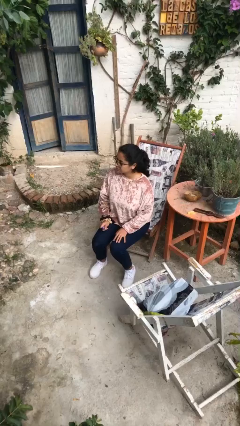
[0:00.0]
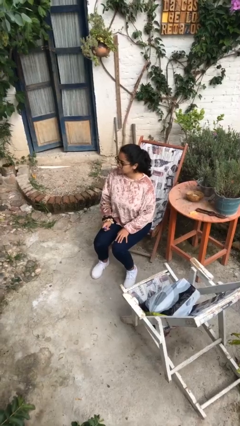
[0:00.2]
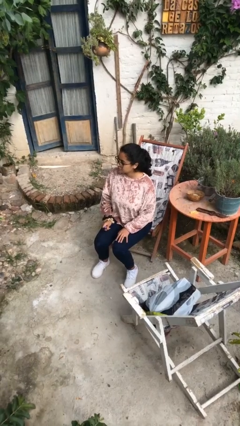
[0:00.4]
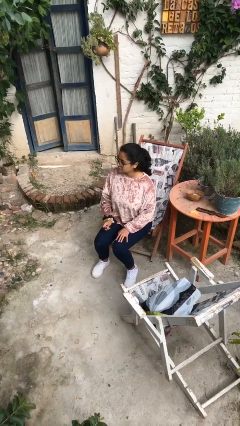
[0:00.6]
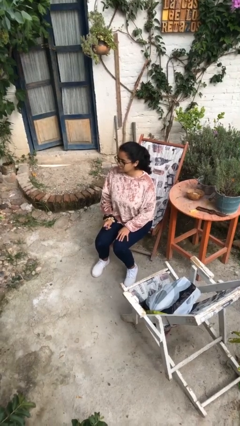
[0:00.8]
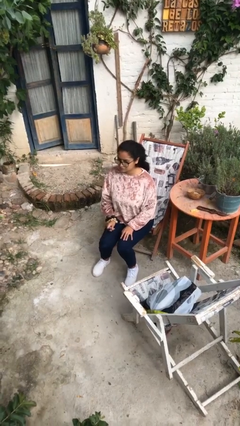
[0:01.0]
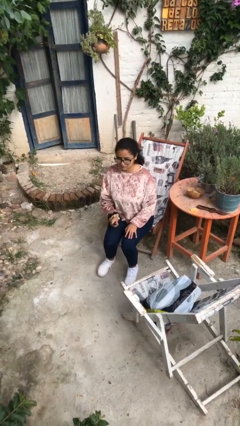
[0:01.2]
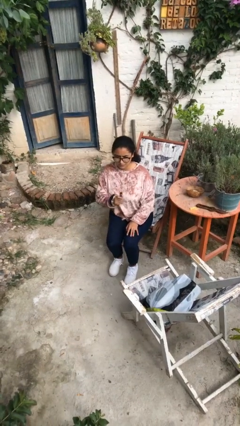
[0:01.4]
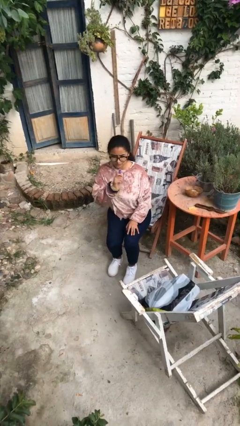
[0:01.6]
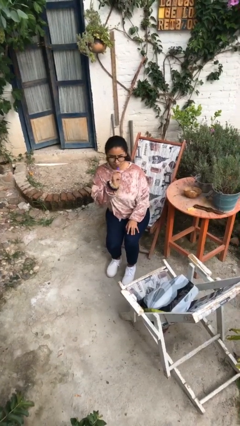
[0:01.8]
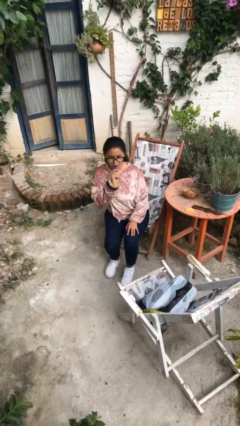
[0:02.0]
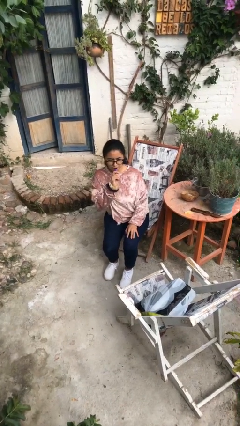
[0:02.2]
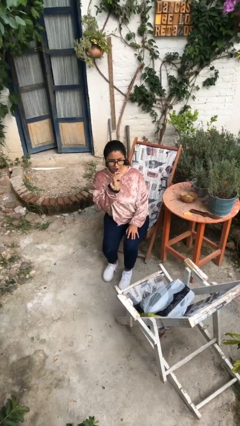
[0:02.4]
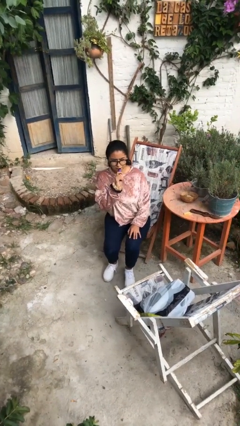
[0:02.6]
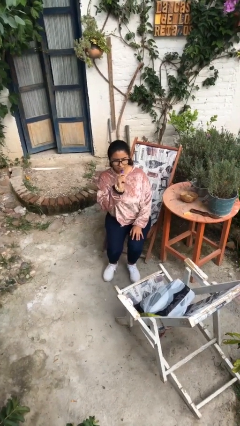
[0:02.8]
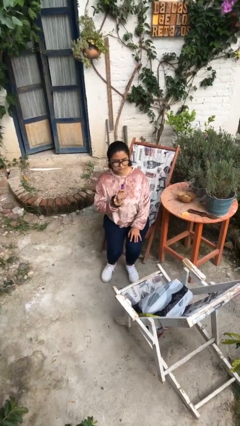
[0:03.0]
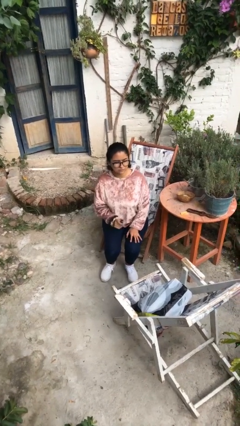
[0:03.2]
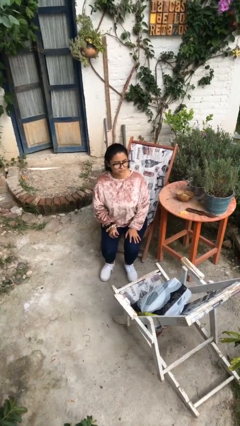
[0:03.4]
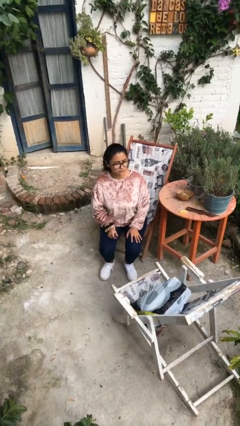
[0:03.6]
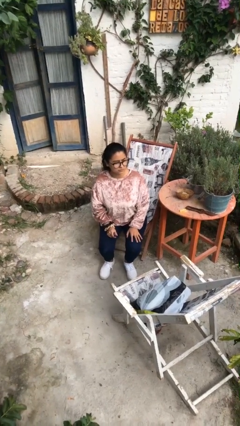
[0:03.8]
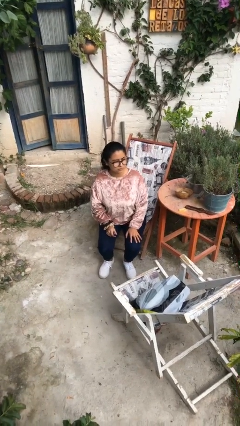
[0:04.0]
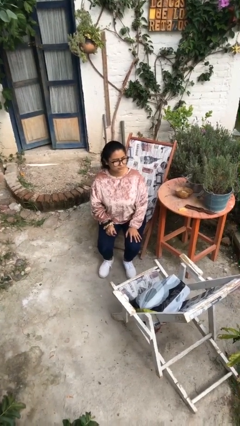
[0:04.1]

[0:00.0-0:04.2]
person vapes

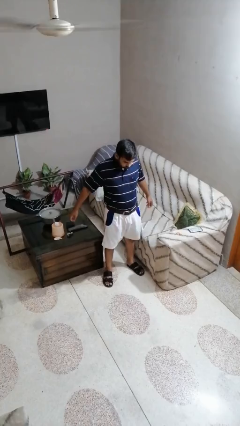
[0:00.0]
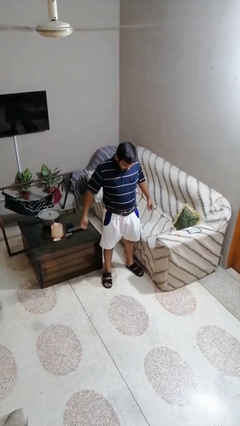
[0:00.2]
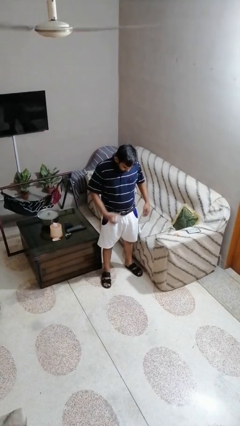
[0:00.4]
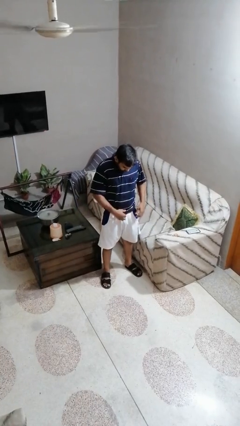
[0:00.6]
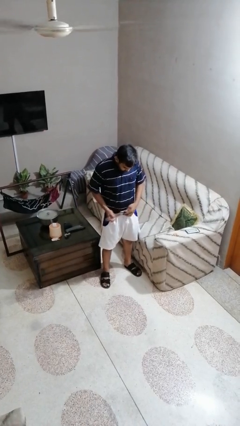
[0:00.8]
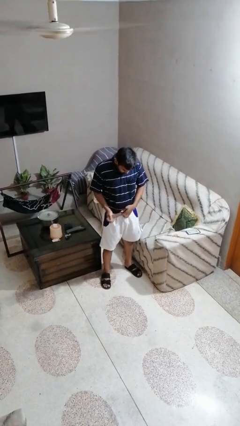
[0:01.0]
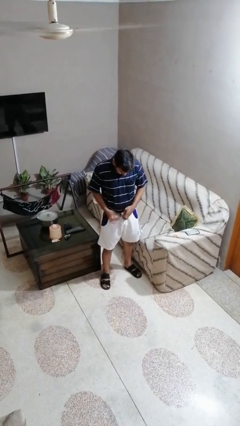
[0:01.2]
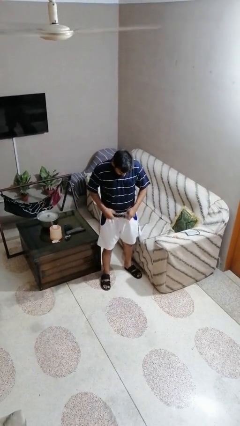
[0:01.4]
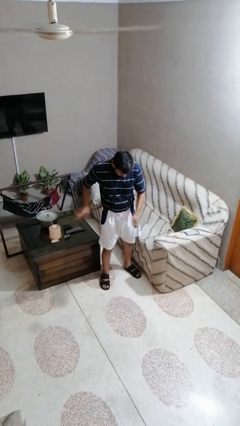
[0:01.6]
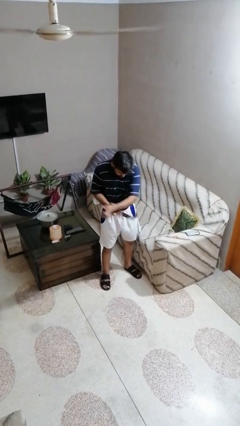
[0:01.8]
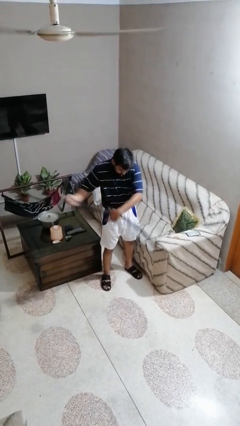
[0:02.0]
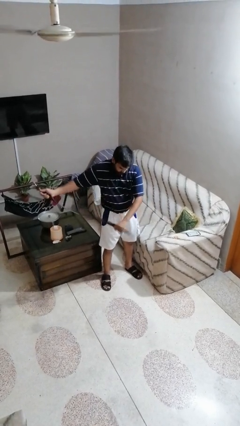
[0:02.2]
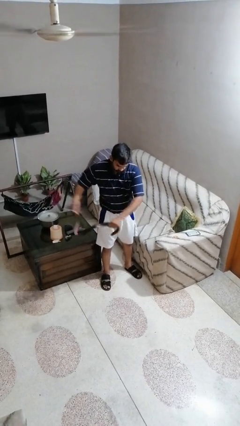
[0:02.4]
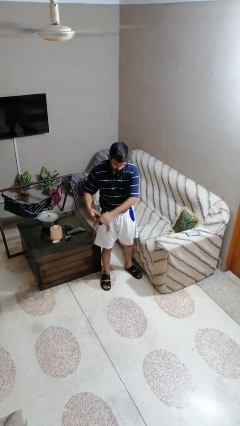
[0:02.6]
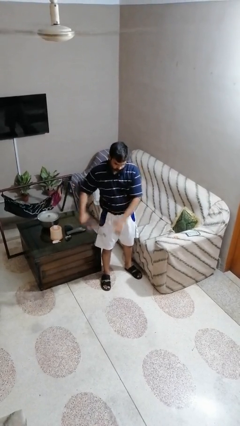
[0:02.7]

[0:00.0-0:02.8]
person takes off belt

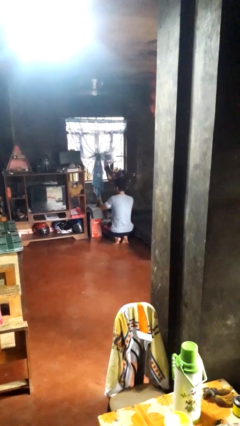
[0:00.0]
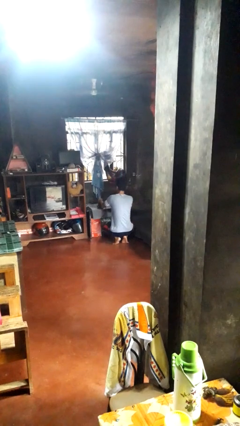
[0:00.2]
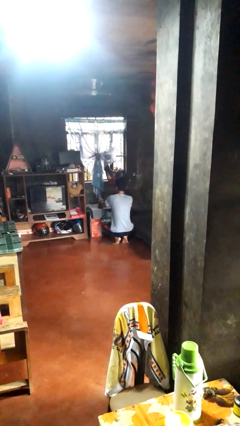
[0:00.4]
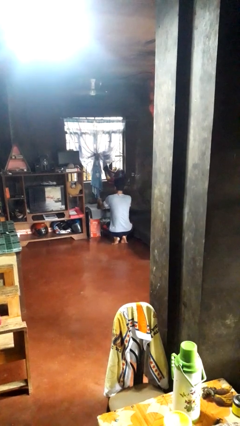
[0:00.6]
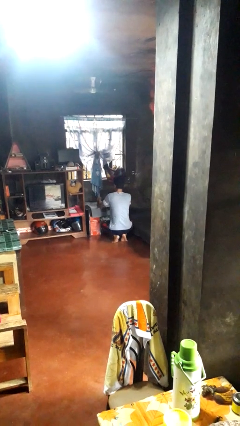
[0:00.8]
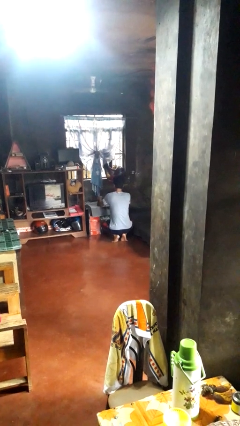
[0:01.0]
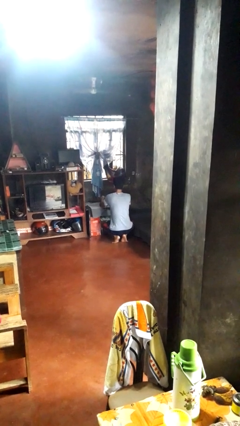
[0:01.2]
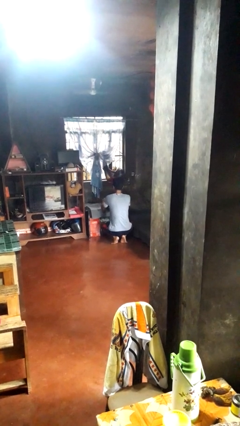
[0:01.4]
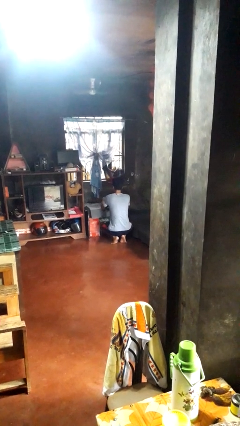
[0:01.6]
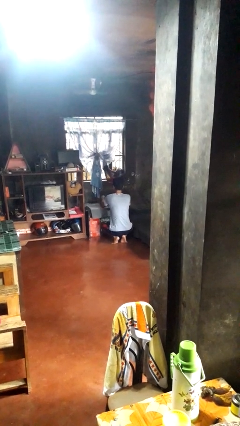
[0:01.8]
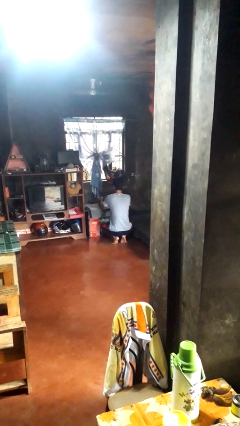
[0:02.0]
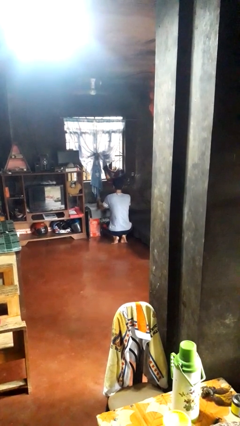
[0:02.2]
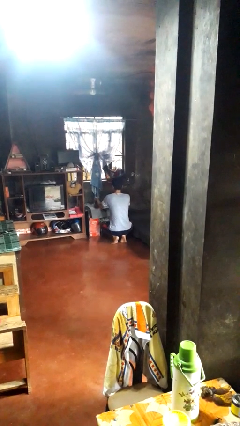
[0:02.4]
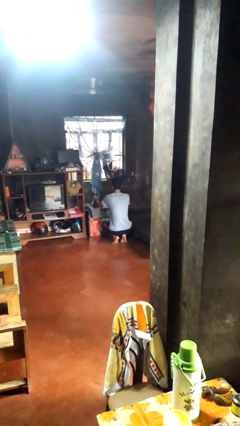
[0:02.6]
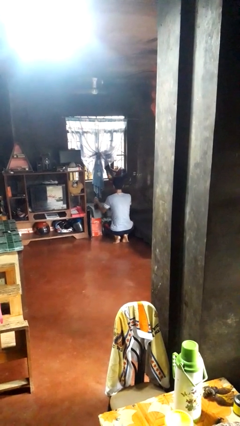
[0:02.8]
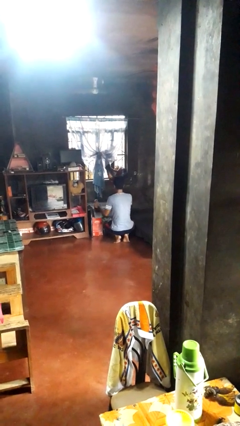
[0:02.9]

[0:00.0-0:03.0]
person irons clothes

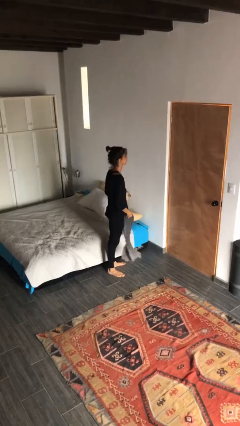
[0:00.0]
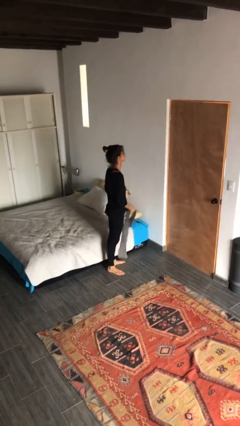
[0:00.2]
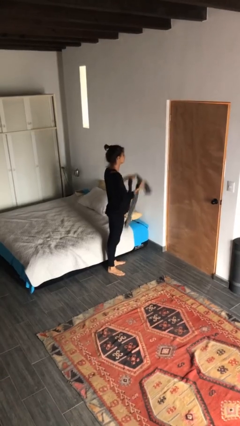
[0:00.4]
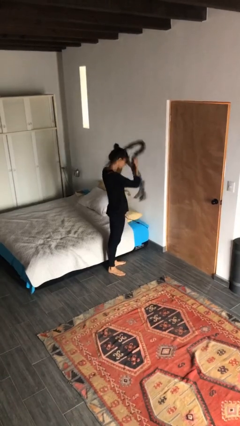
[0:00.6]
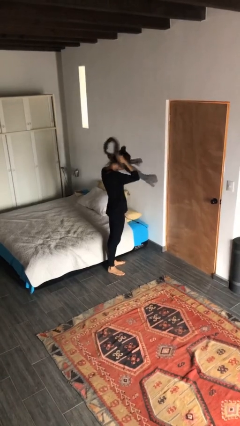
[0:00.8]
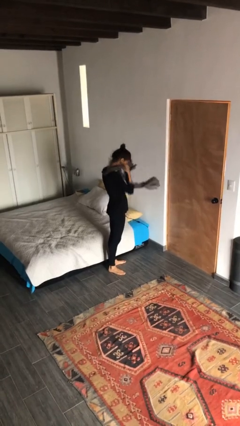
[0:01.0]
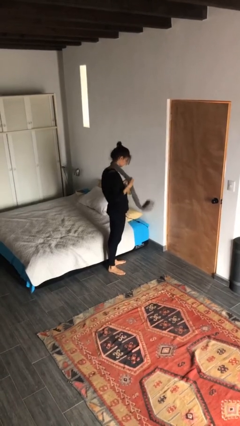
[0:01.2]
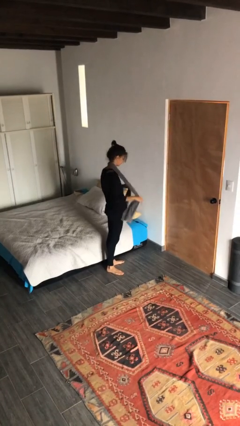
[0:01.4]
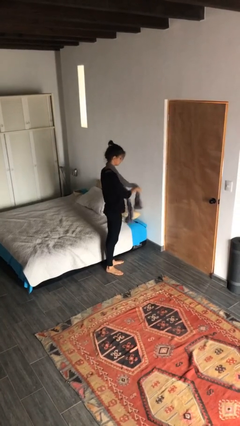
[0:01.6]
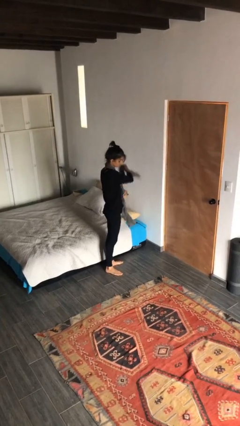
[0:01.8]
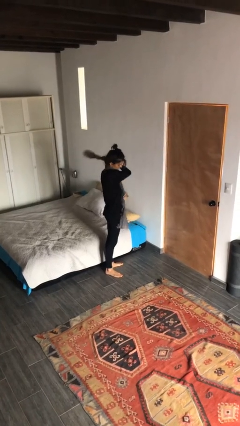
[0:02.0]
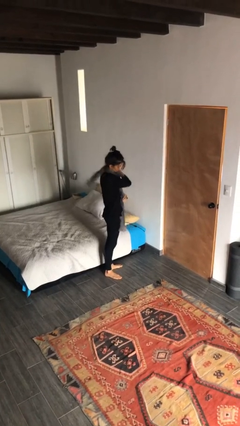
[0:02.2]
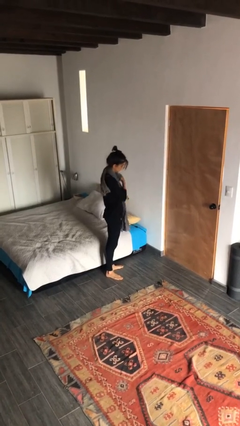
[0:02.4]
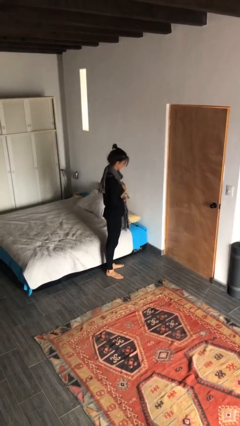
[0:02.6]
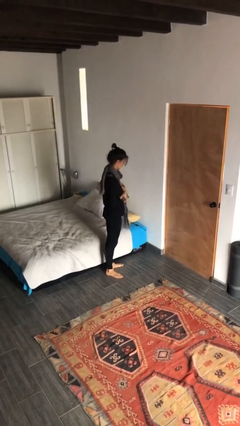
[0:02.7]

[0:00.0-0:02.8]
person puts on scarf

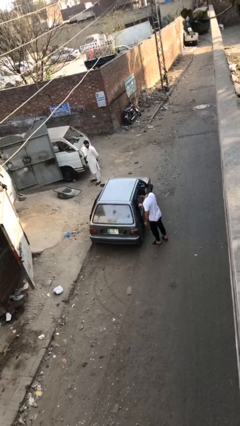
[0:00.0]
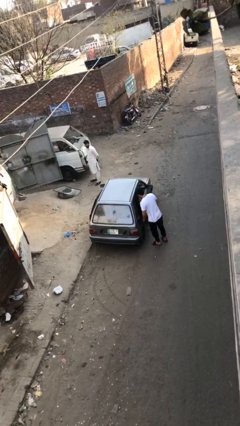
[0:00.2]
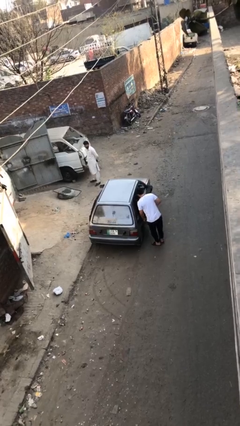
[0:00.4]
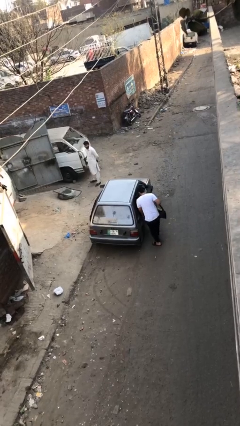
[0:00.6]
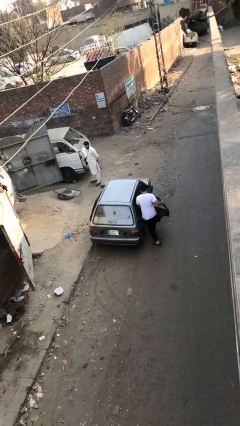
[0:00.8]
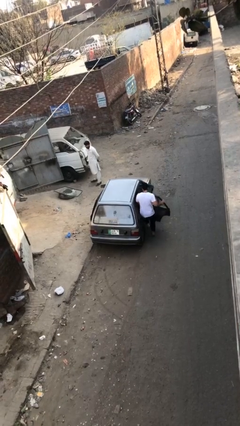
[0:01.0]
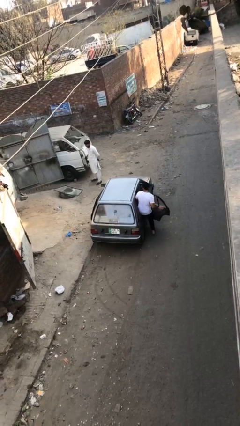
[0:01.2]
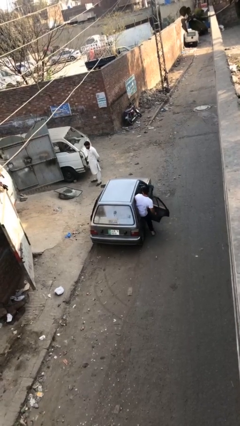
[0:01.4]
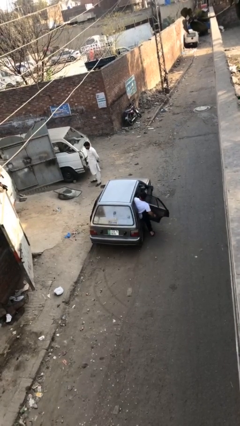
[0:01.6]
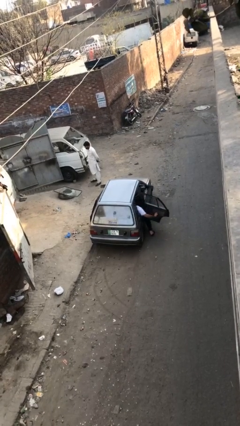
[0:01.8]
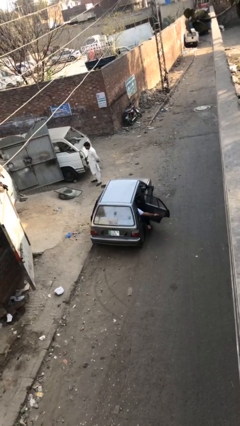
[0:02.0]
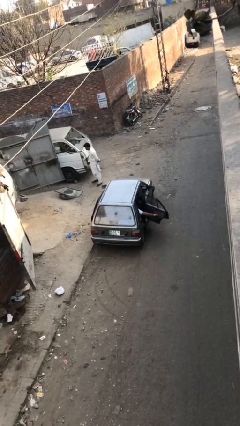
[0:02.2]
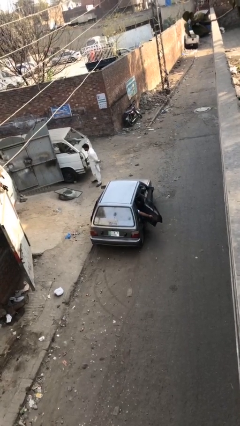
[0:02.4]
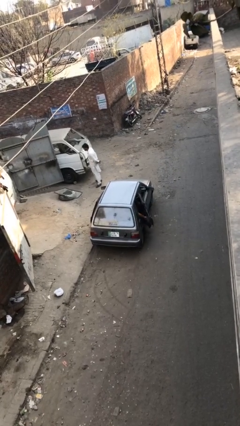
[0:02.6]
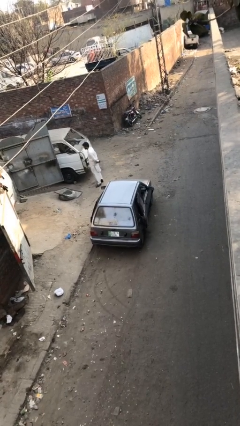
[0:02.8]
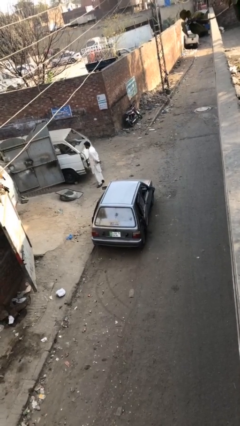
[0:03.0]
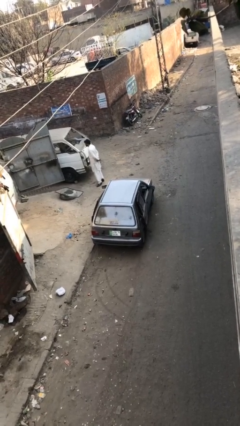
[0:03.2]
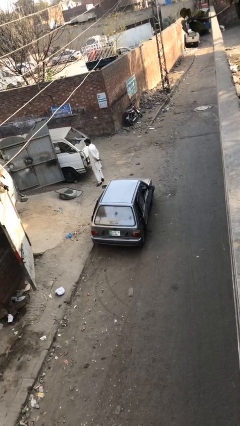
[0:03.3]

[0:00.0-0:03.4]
car picks up person

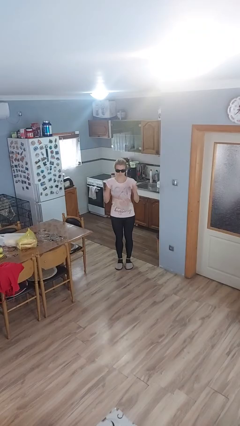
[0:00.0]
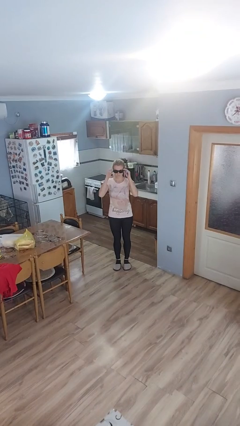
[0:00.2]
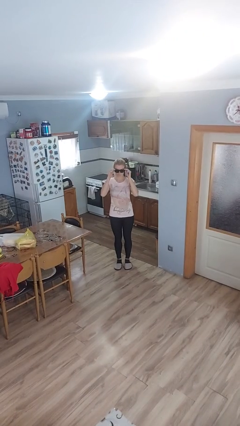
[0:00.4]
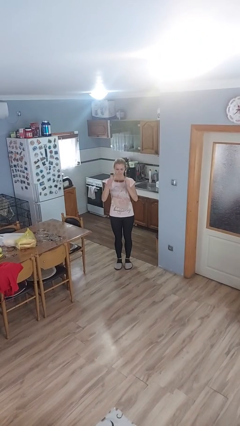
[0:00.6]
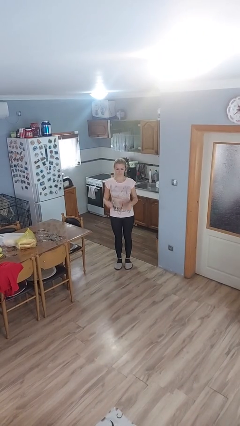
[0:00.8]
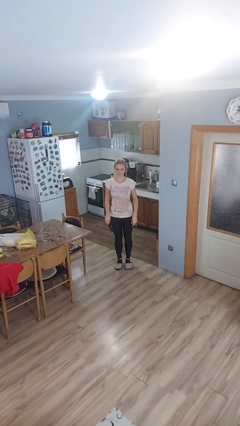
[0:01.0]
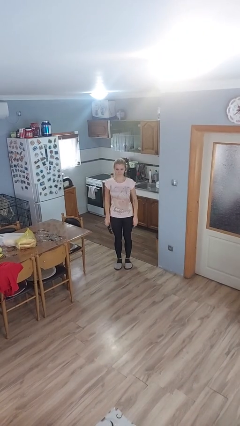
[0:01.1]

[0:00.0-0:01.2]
person takes off sunglasses

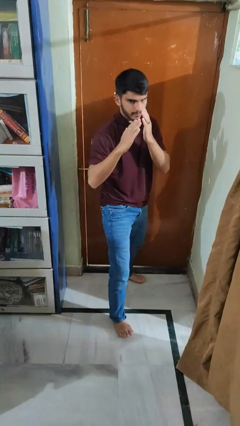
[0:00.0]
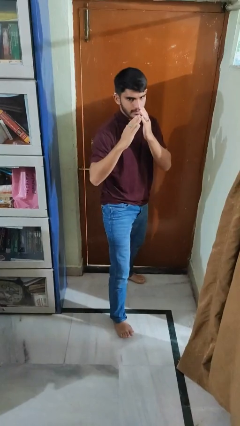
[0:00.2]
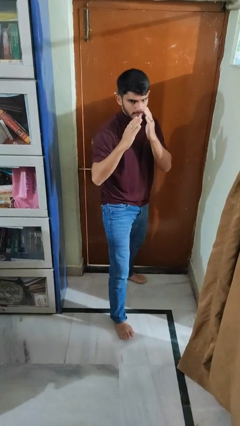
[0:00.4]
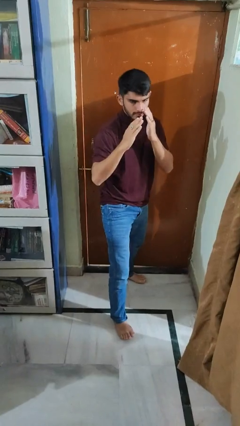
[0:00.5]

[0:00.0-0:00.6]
person karate kicks
